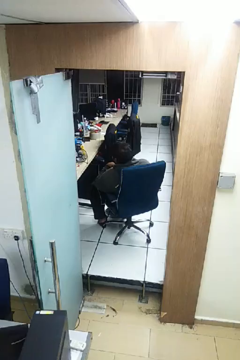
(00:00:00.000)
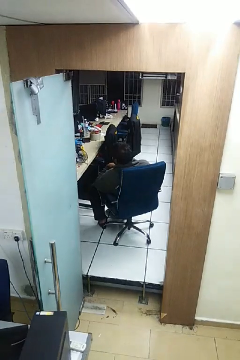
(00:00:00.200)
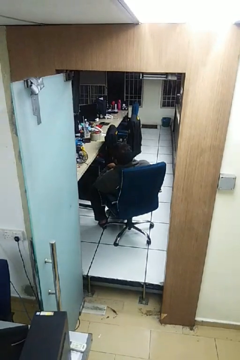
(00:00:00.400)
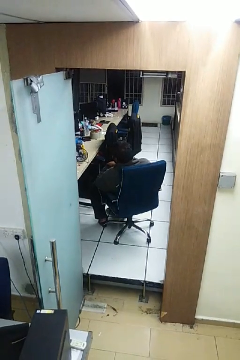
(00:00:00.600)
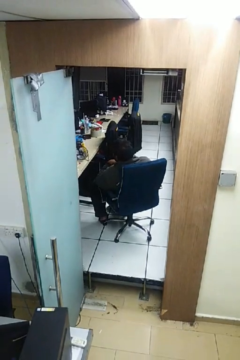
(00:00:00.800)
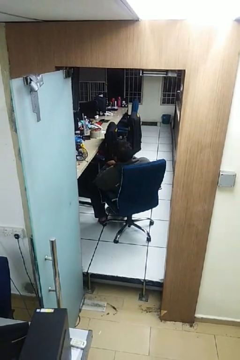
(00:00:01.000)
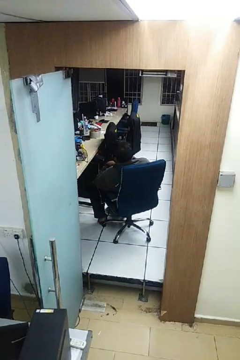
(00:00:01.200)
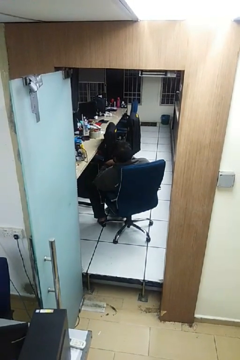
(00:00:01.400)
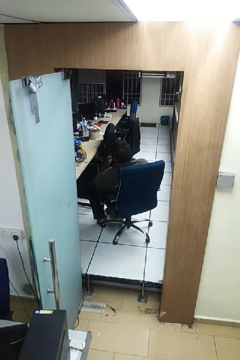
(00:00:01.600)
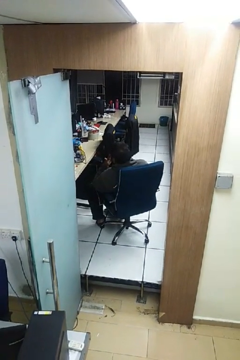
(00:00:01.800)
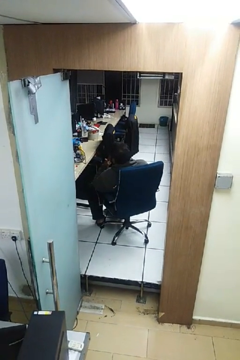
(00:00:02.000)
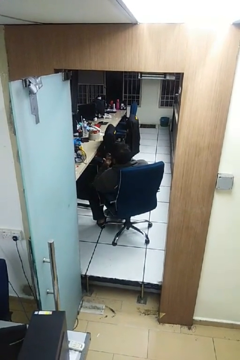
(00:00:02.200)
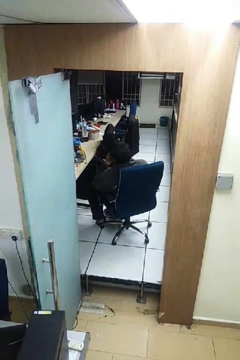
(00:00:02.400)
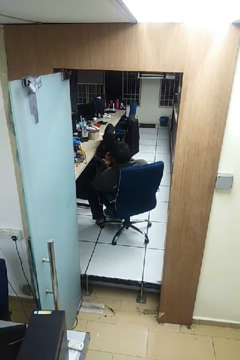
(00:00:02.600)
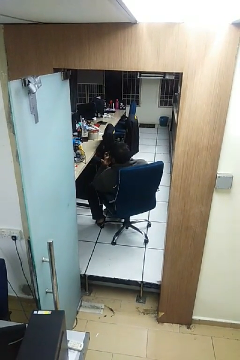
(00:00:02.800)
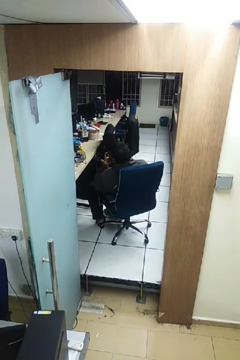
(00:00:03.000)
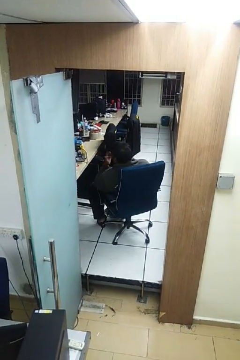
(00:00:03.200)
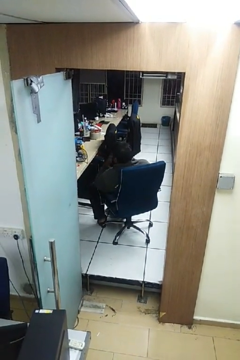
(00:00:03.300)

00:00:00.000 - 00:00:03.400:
person licks fingers

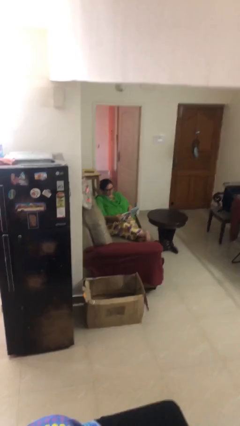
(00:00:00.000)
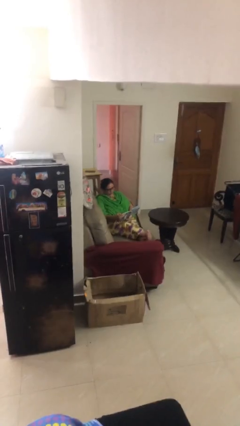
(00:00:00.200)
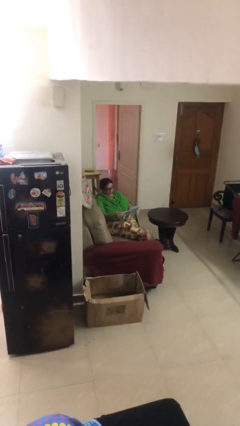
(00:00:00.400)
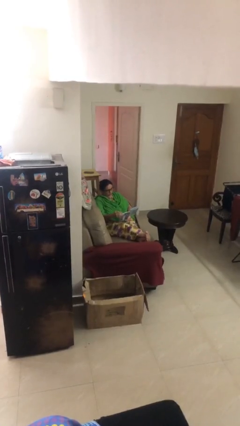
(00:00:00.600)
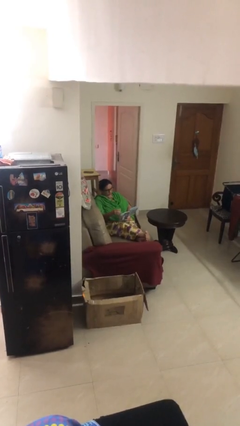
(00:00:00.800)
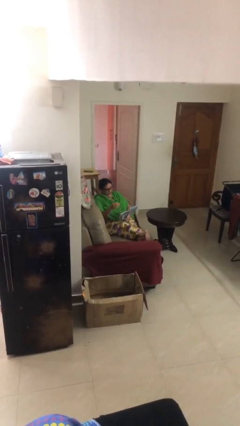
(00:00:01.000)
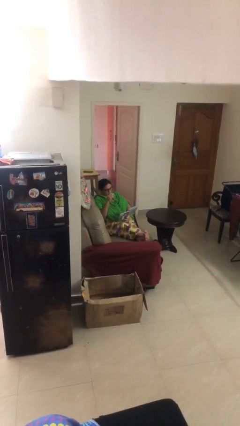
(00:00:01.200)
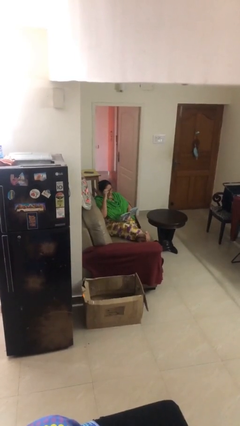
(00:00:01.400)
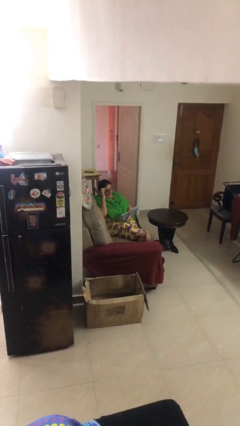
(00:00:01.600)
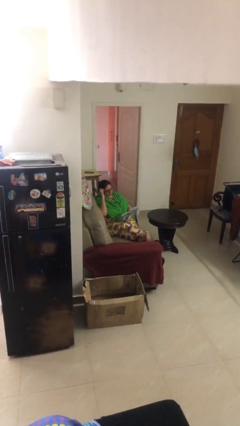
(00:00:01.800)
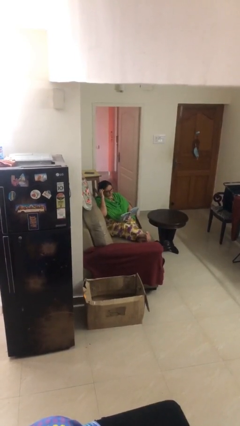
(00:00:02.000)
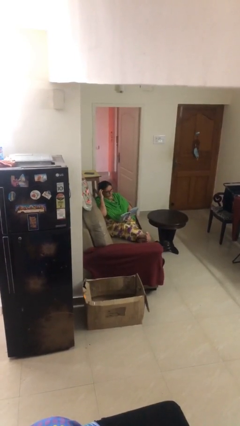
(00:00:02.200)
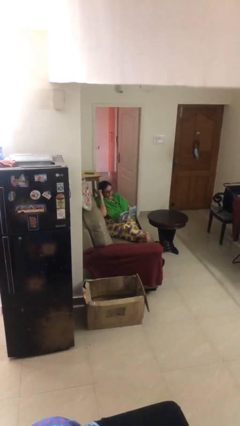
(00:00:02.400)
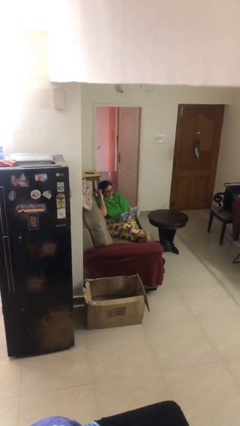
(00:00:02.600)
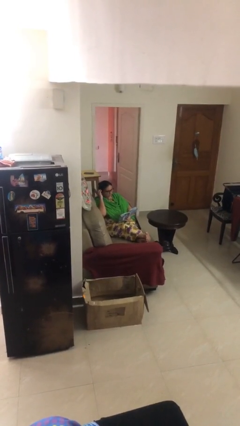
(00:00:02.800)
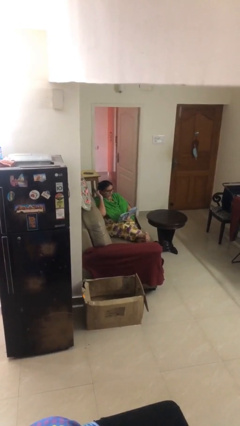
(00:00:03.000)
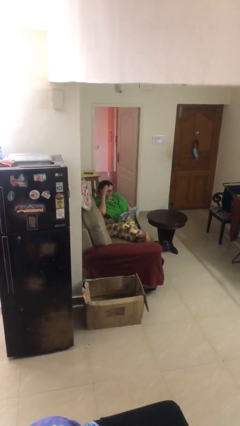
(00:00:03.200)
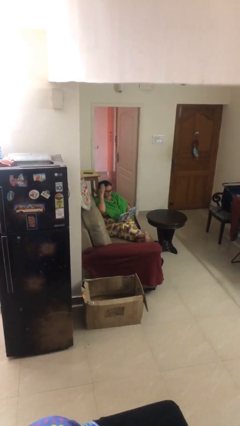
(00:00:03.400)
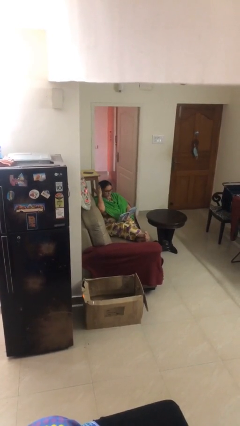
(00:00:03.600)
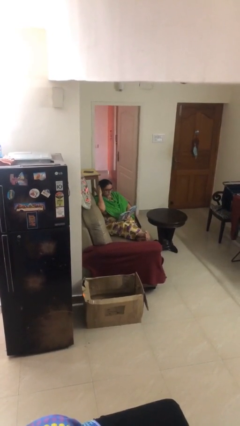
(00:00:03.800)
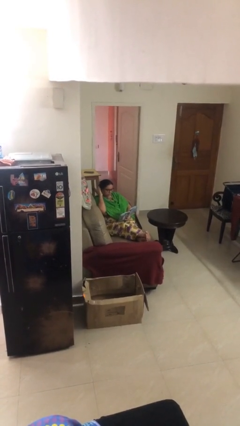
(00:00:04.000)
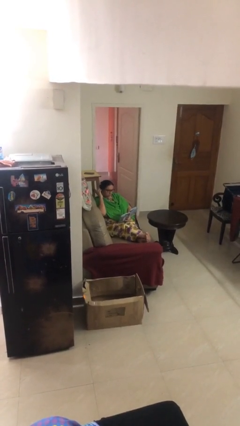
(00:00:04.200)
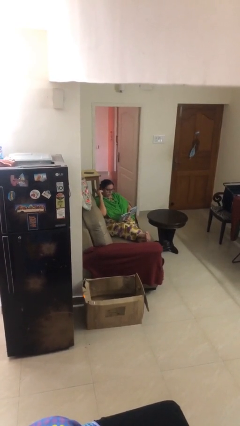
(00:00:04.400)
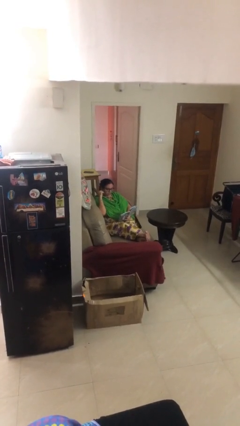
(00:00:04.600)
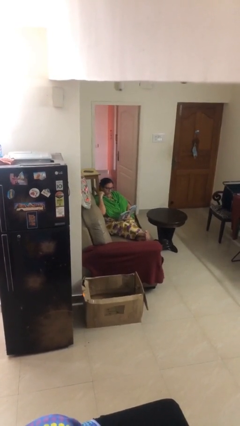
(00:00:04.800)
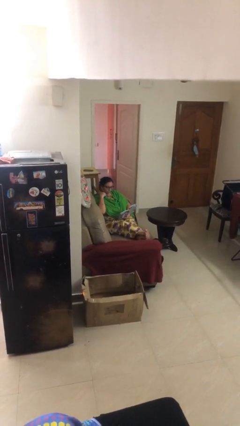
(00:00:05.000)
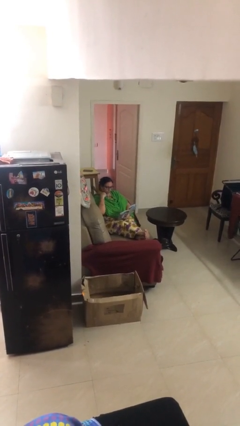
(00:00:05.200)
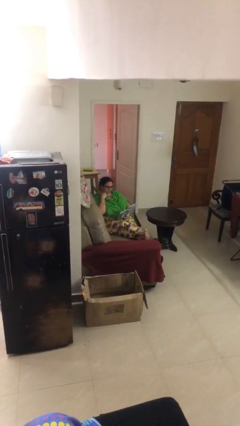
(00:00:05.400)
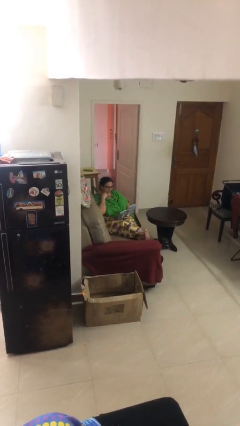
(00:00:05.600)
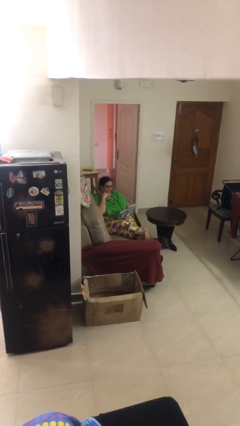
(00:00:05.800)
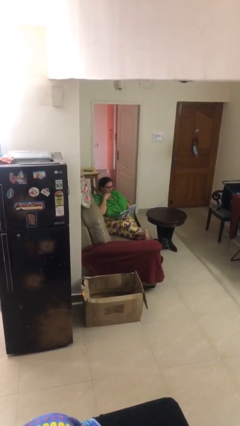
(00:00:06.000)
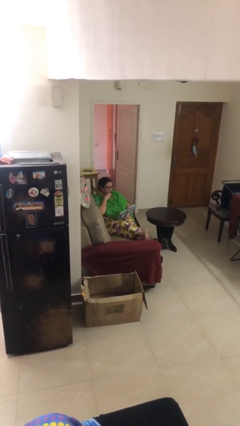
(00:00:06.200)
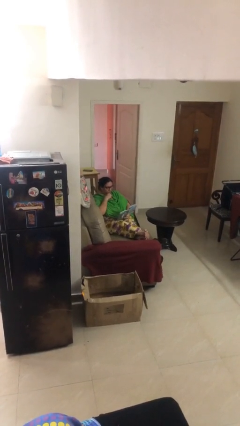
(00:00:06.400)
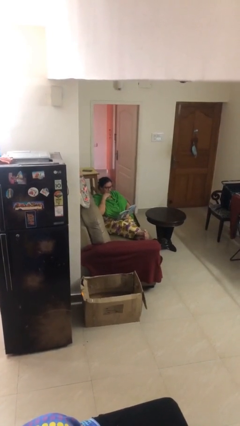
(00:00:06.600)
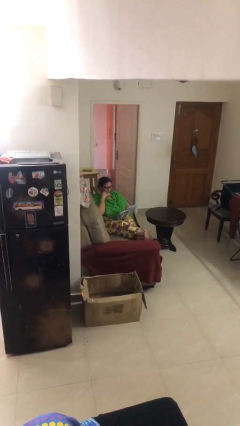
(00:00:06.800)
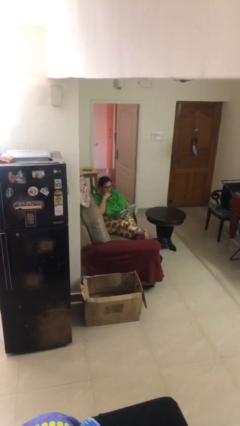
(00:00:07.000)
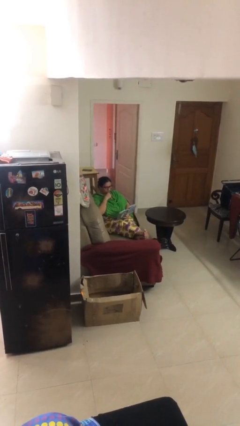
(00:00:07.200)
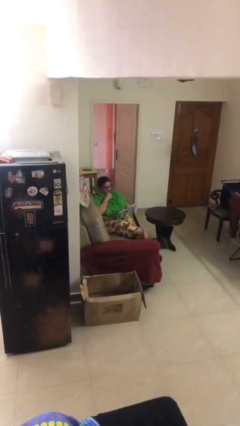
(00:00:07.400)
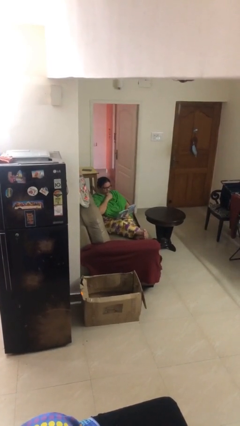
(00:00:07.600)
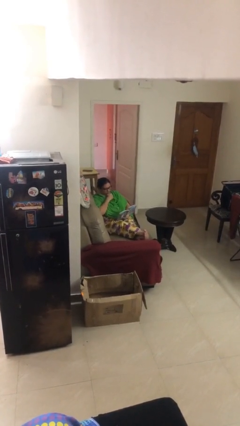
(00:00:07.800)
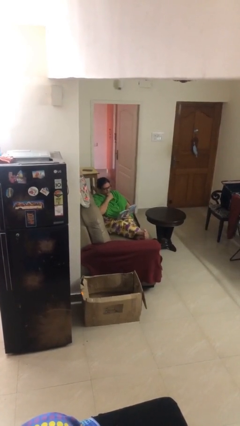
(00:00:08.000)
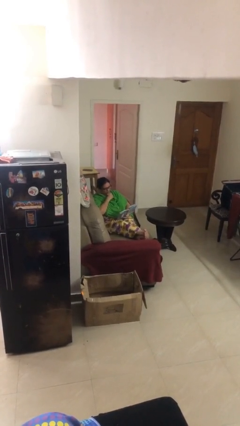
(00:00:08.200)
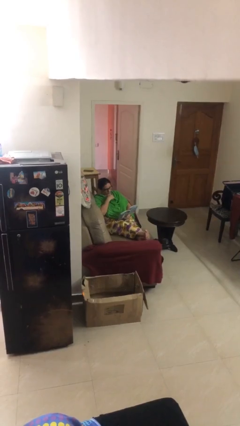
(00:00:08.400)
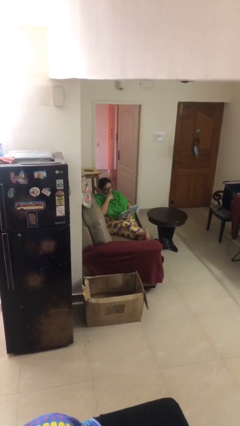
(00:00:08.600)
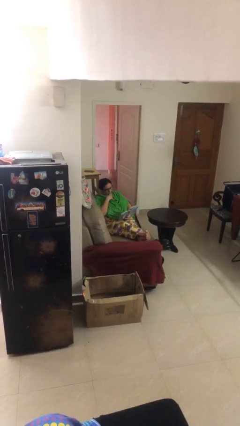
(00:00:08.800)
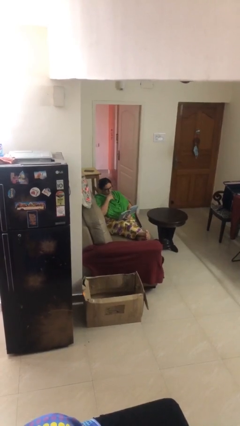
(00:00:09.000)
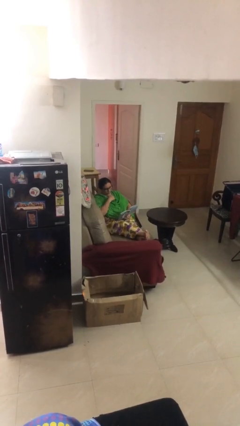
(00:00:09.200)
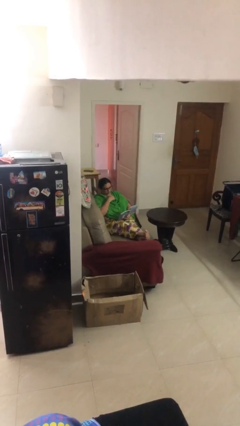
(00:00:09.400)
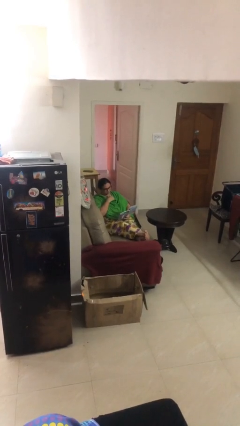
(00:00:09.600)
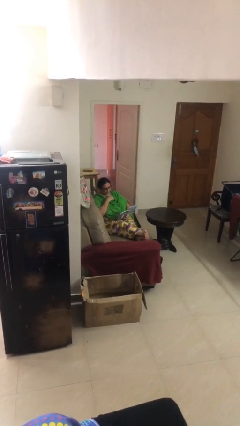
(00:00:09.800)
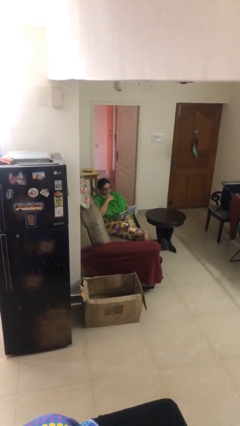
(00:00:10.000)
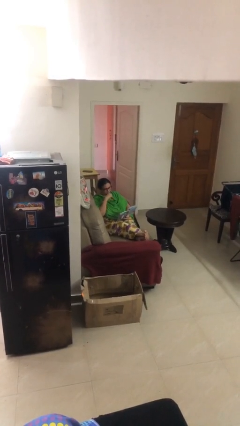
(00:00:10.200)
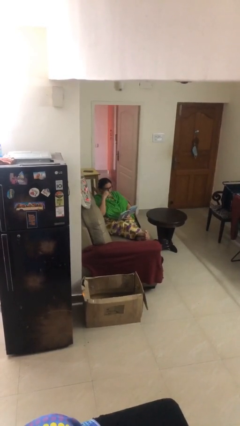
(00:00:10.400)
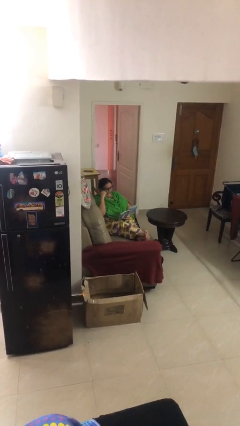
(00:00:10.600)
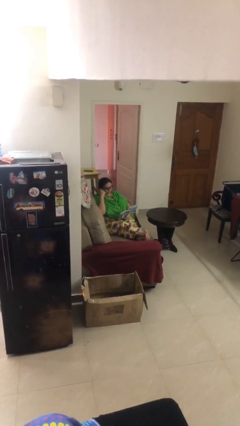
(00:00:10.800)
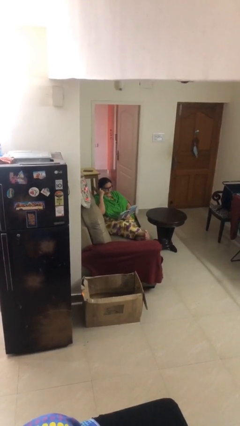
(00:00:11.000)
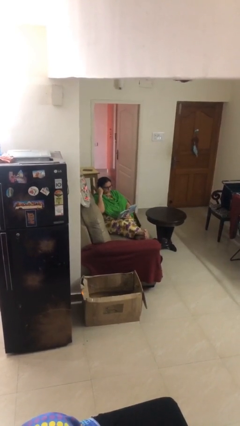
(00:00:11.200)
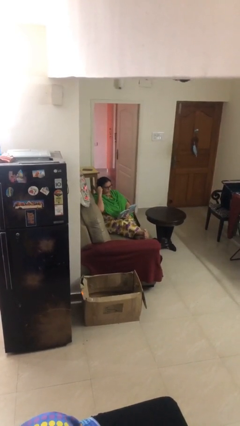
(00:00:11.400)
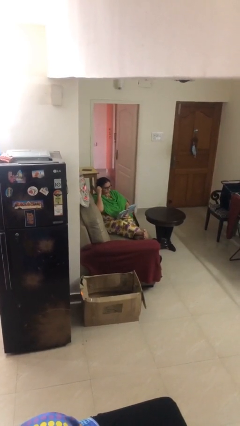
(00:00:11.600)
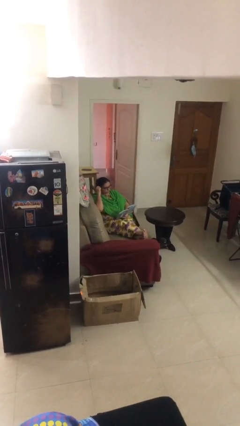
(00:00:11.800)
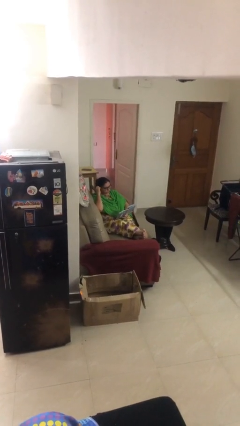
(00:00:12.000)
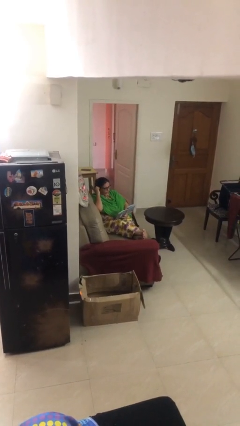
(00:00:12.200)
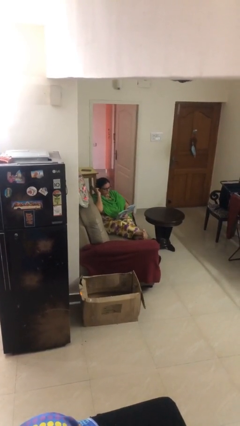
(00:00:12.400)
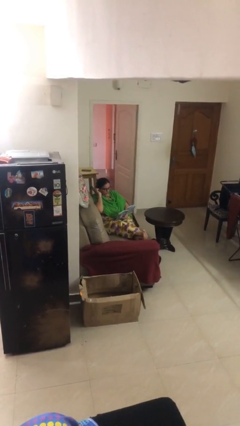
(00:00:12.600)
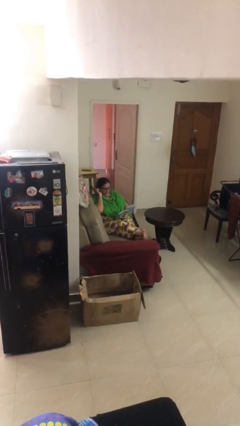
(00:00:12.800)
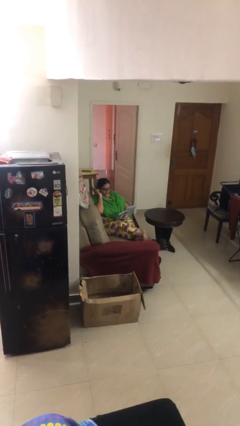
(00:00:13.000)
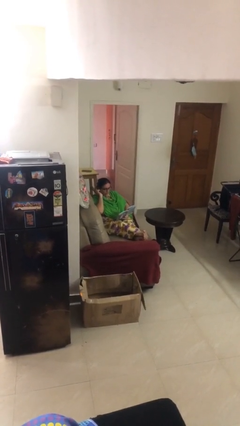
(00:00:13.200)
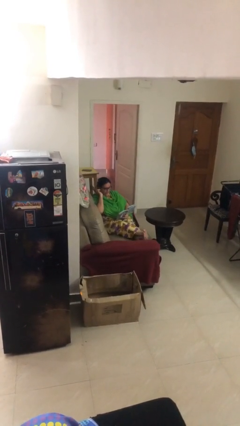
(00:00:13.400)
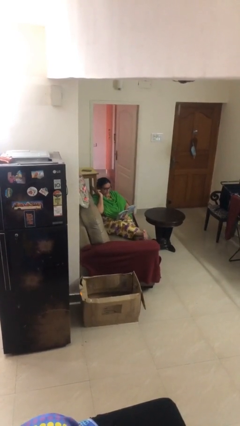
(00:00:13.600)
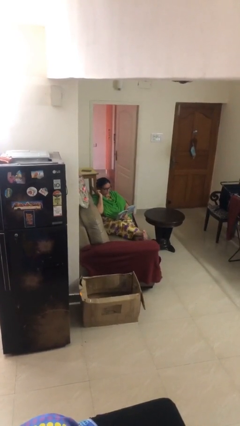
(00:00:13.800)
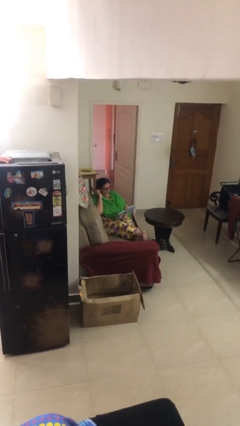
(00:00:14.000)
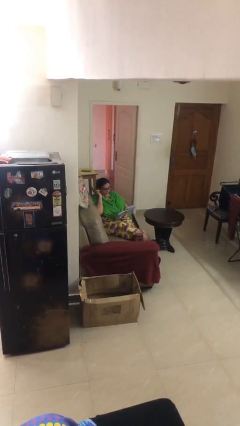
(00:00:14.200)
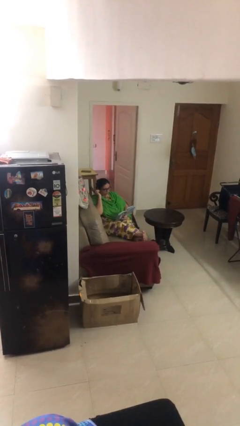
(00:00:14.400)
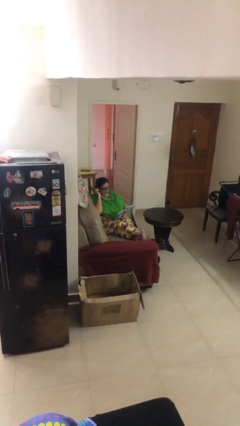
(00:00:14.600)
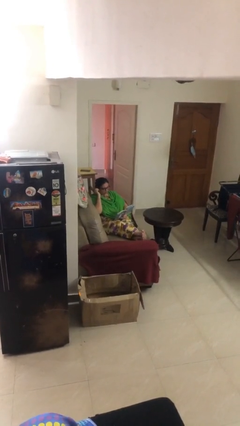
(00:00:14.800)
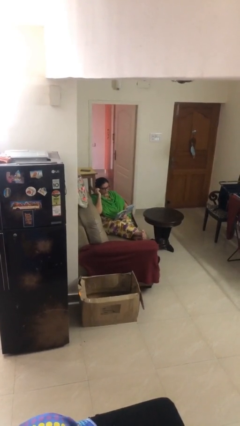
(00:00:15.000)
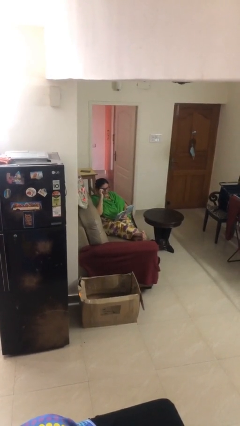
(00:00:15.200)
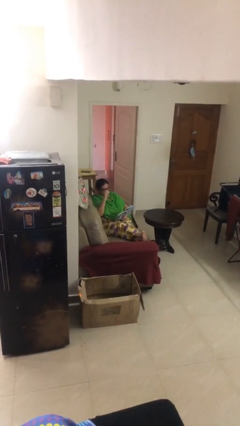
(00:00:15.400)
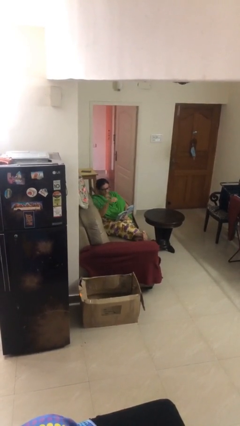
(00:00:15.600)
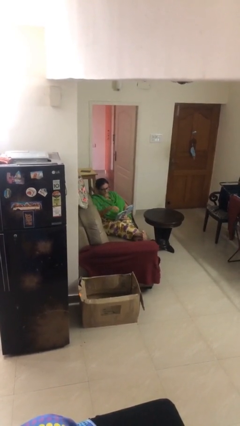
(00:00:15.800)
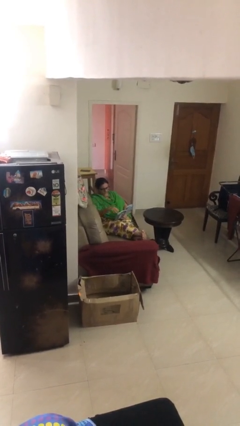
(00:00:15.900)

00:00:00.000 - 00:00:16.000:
person reads document
